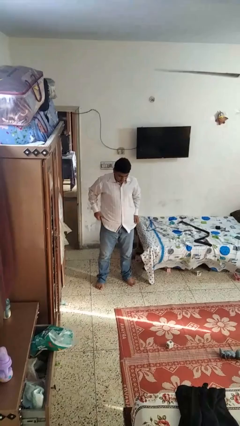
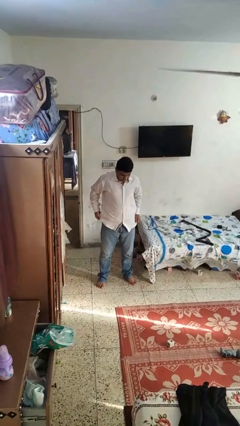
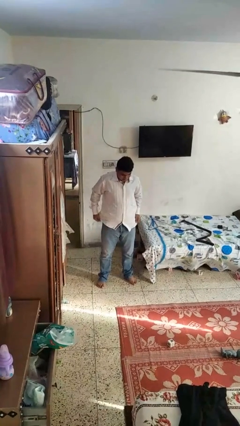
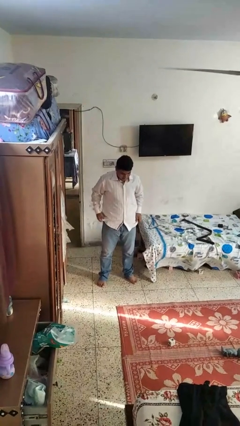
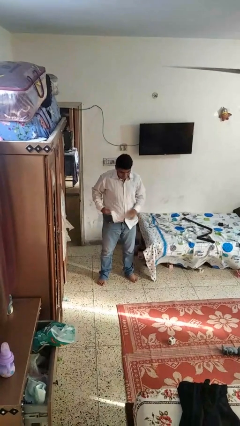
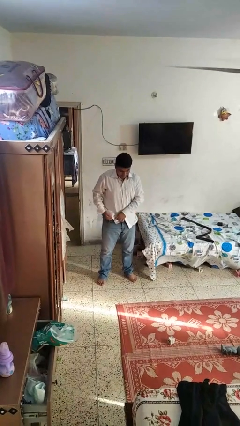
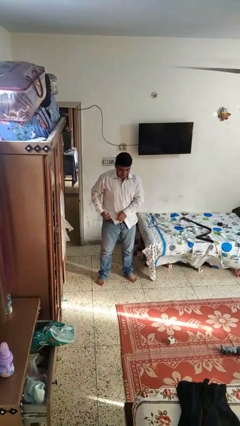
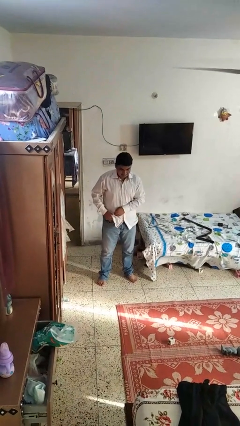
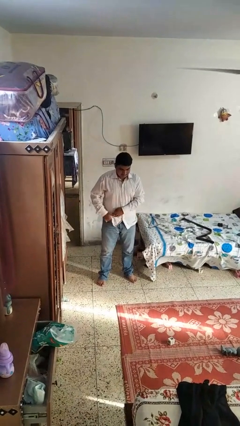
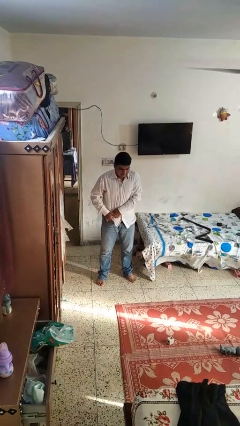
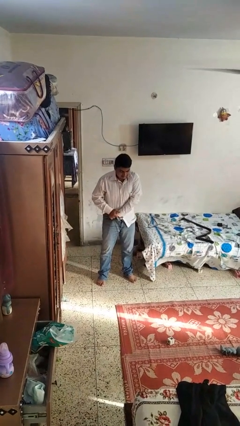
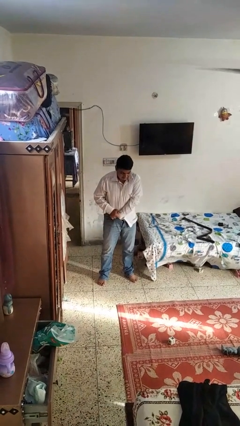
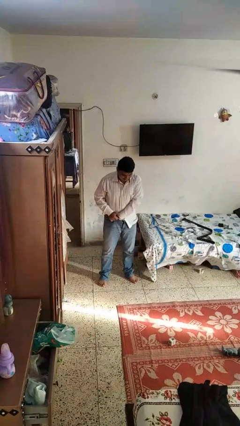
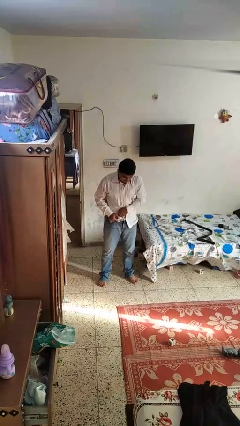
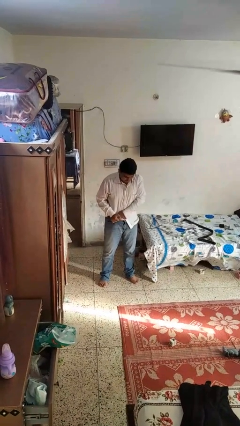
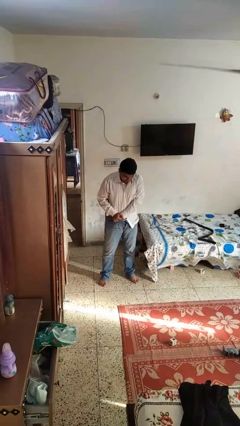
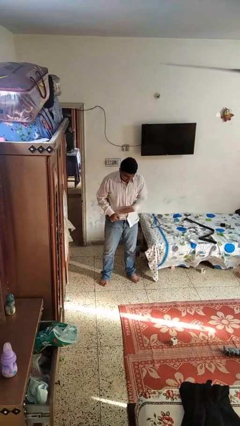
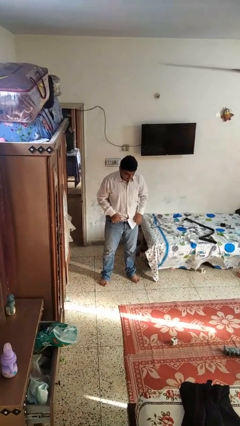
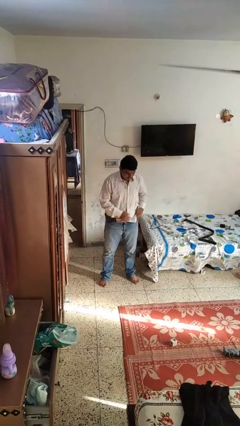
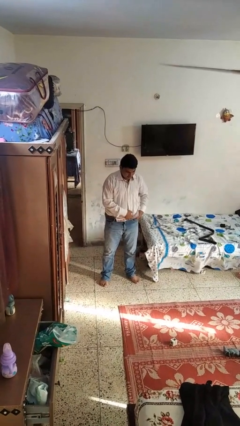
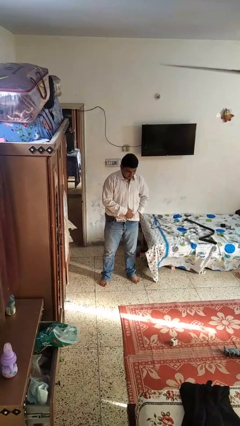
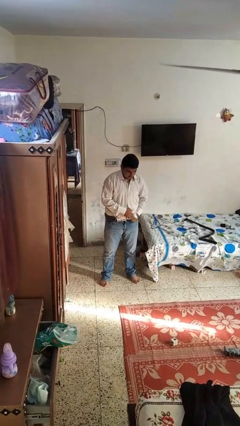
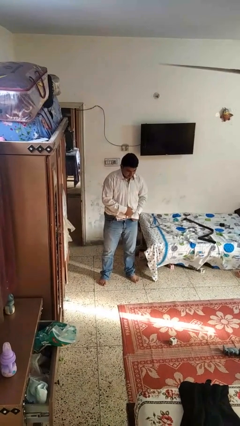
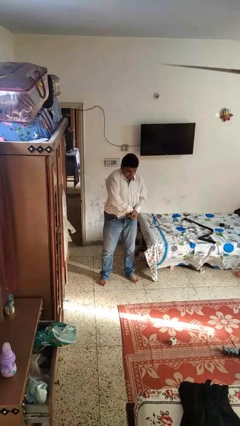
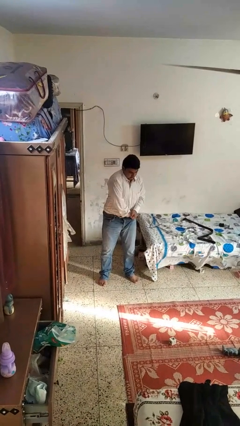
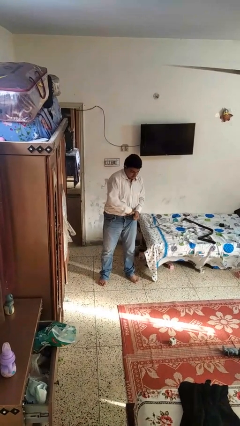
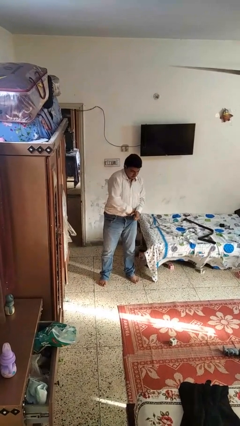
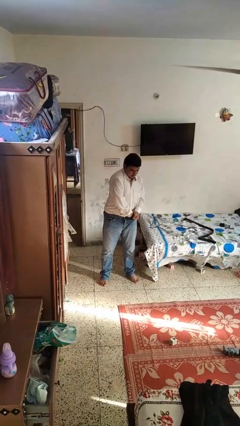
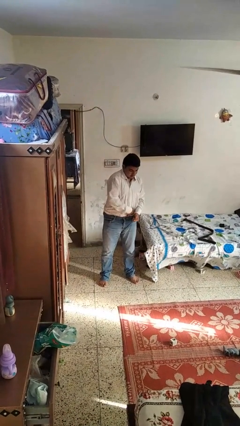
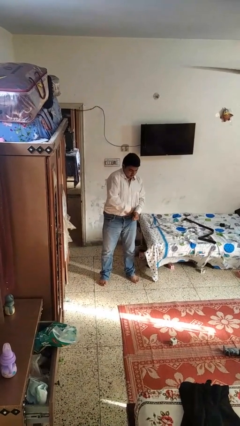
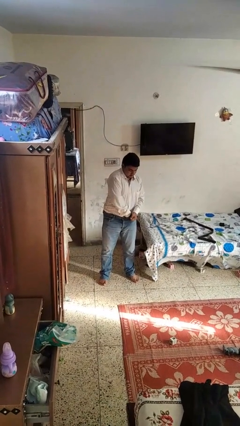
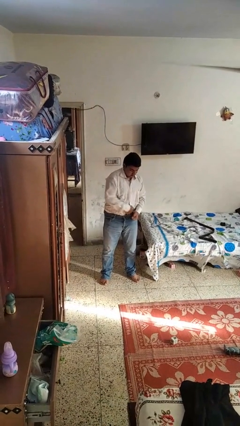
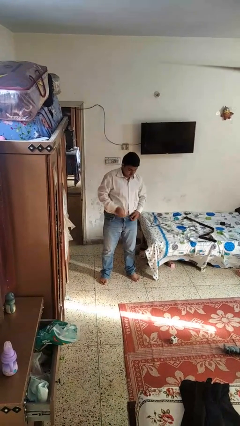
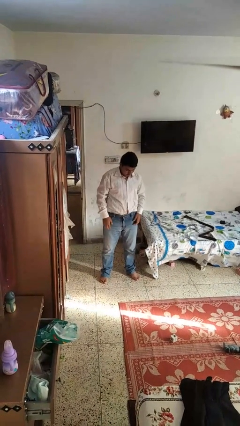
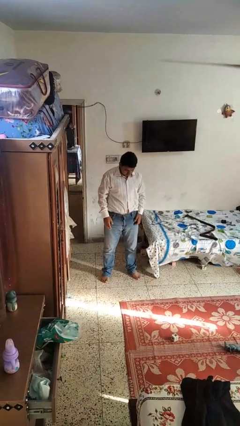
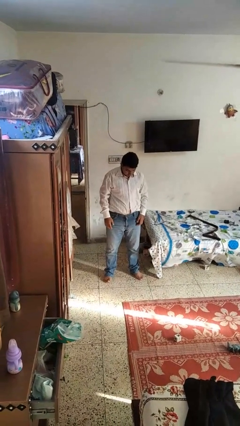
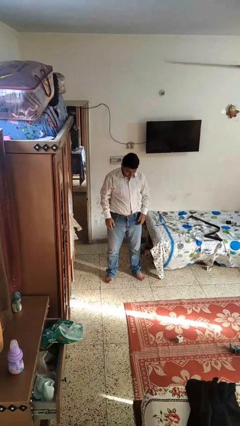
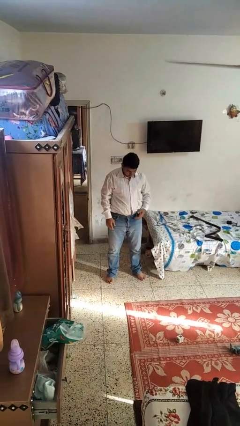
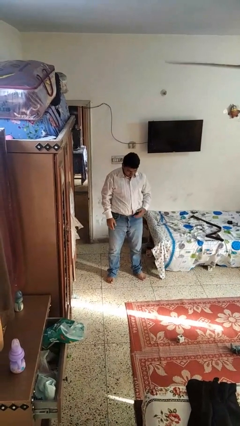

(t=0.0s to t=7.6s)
person tucks in shirt

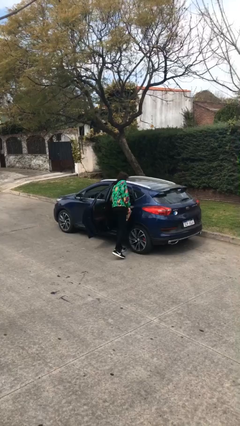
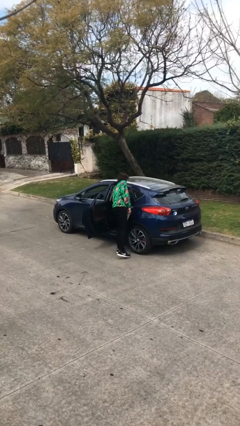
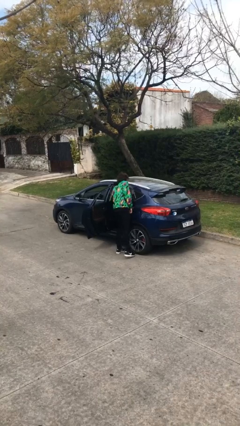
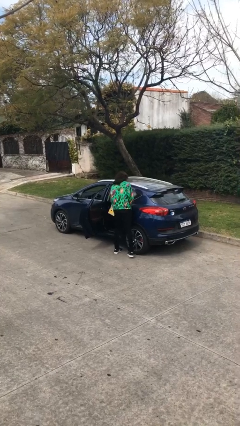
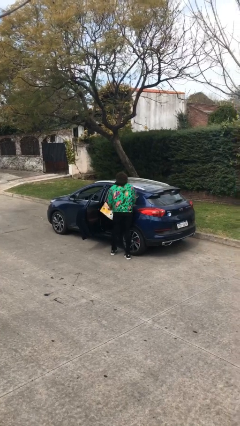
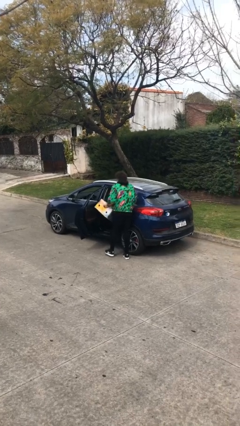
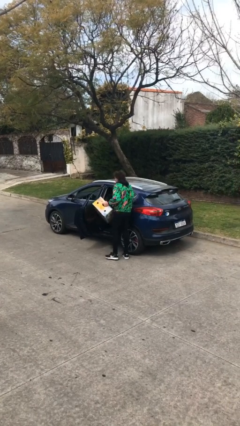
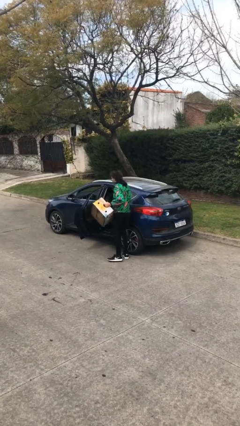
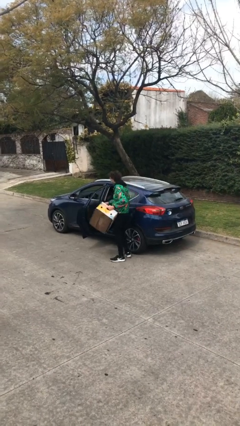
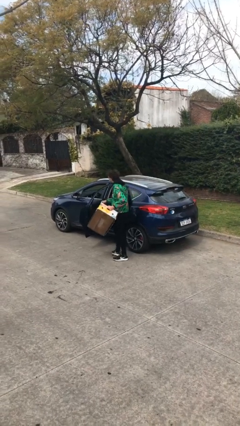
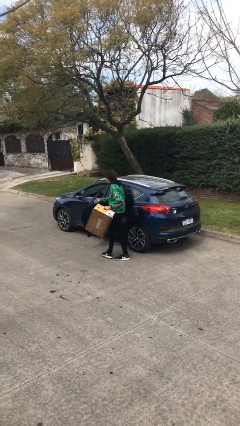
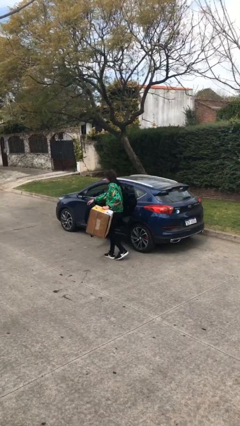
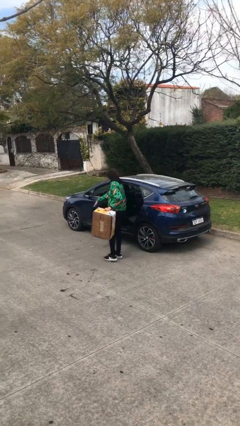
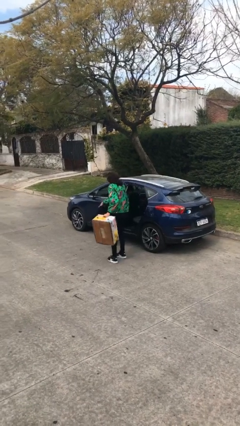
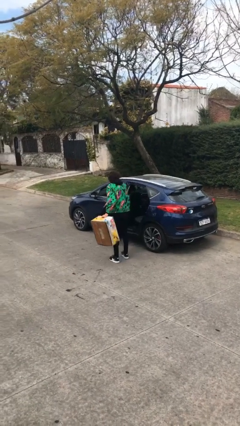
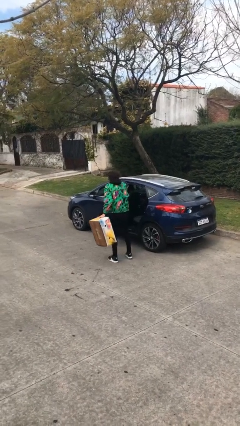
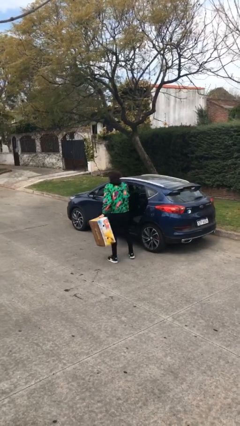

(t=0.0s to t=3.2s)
person unloads car

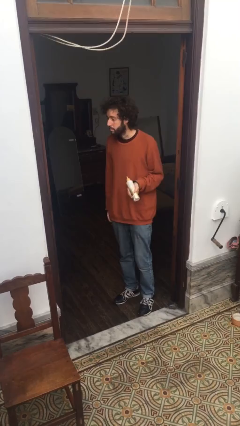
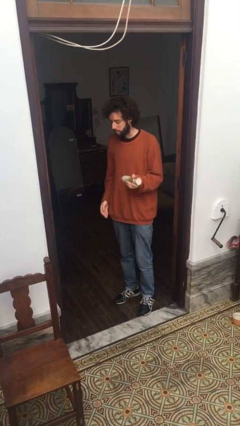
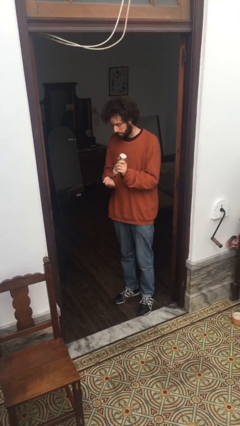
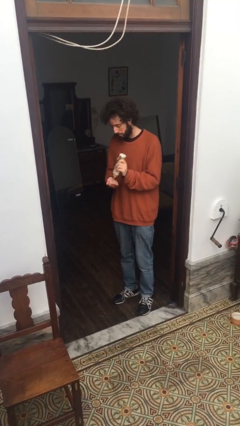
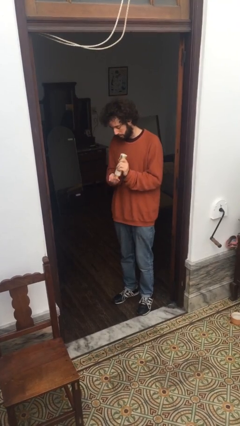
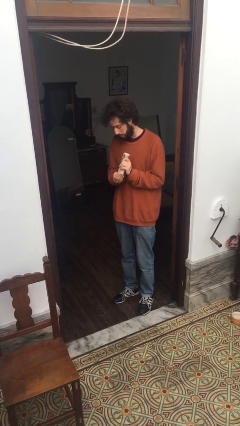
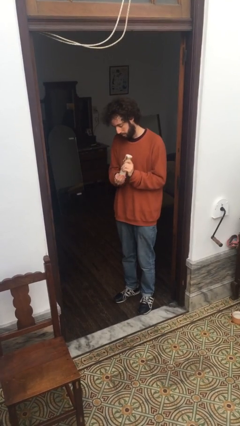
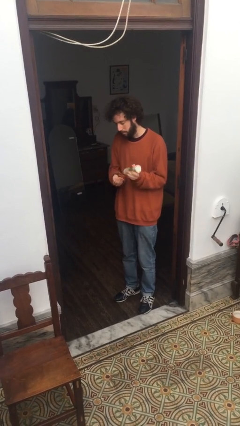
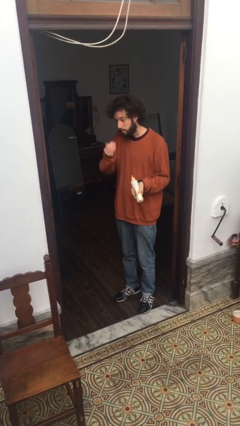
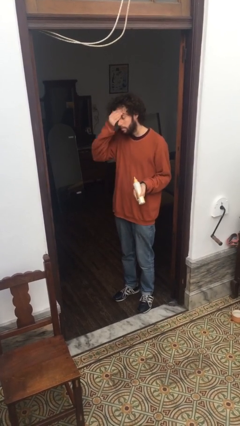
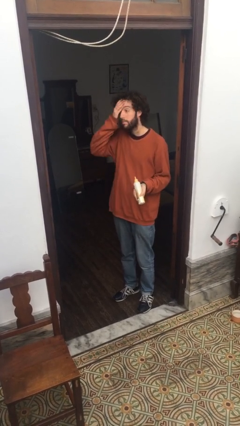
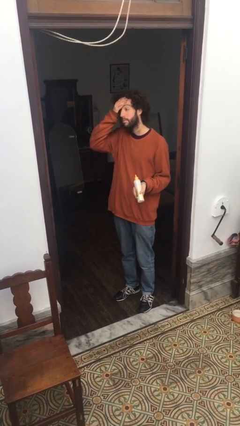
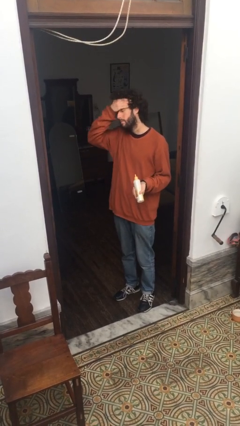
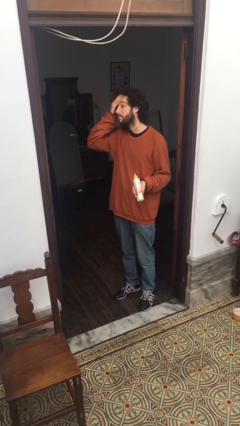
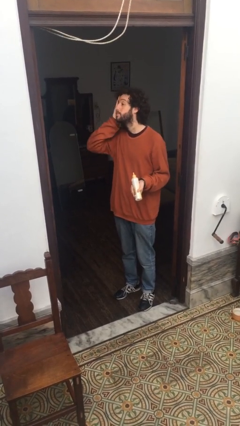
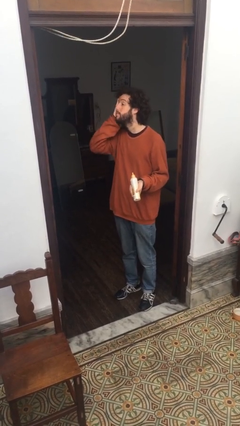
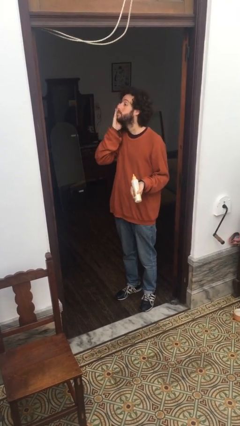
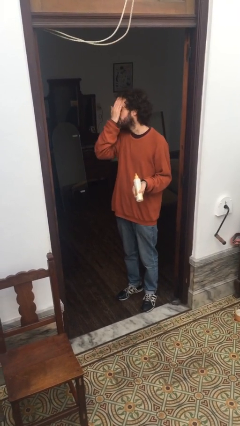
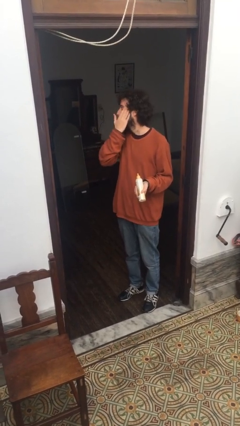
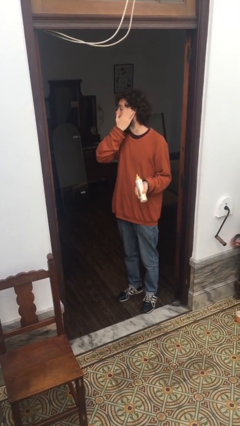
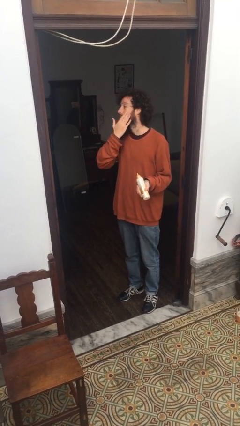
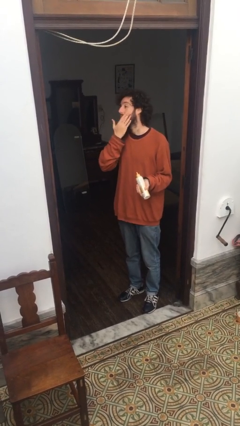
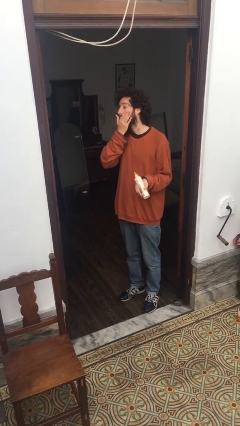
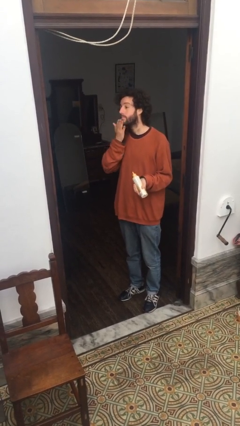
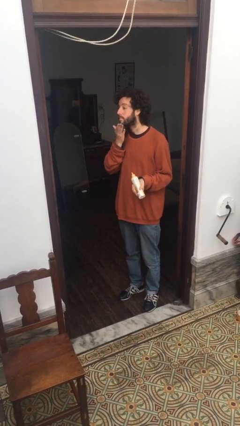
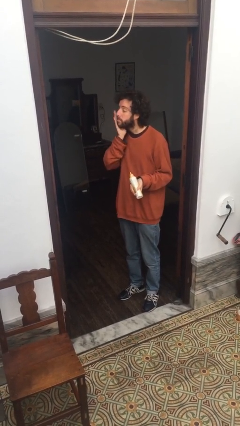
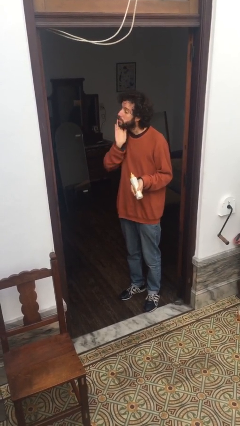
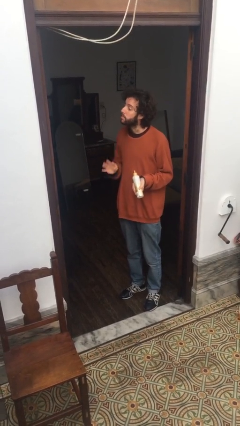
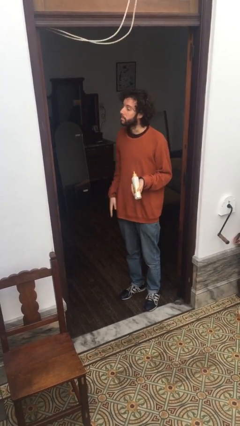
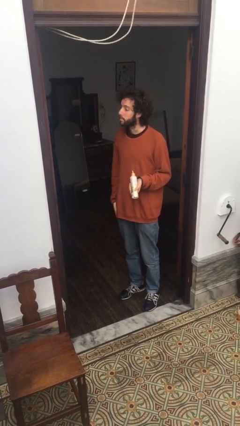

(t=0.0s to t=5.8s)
person applies facial moisturizer

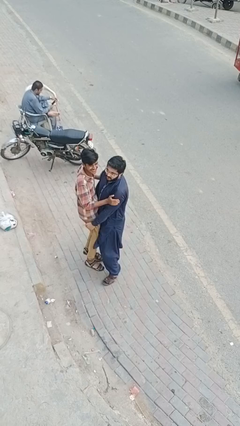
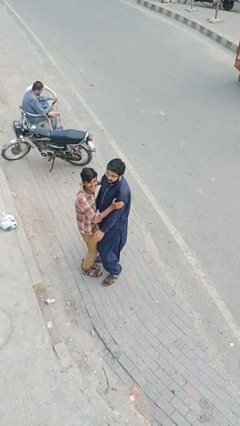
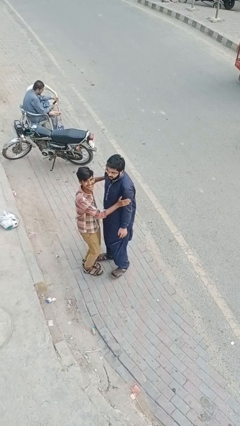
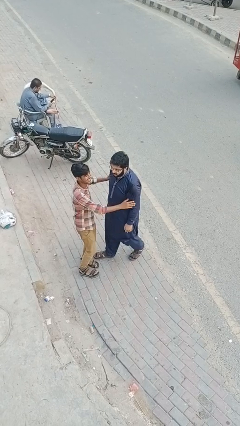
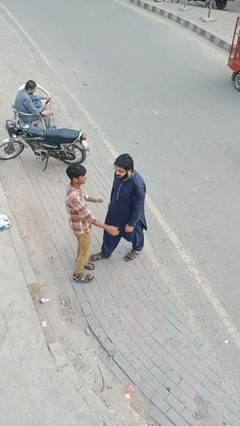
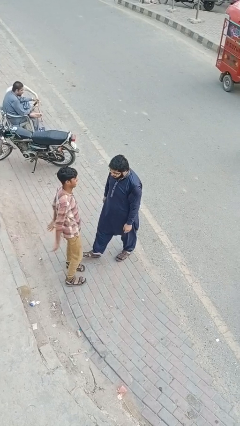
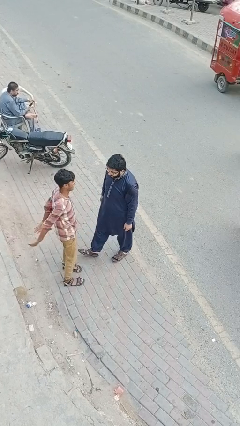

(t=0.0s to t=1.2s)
person puts down person

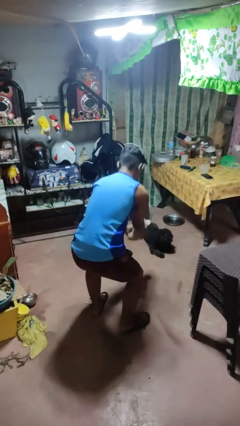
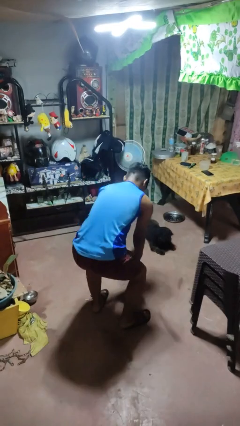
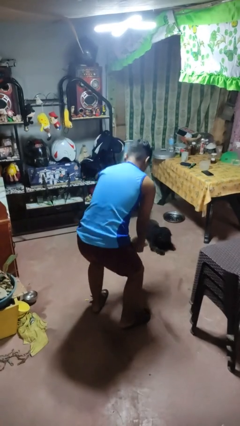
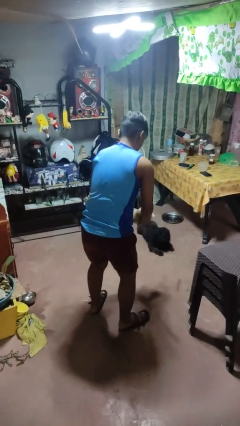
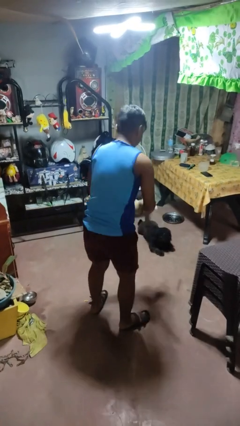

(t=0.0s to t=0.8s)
person catches dropped object
